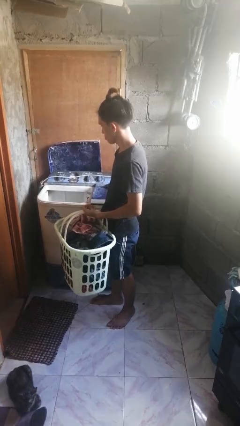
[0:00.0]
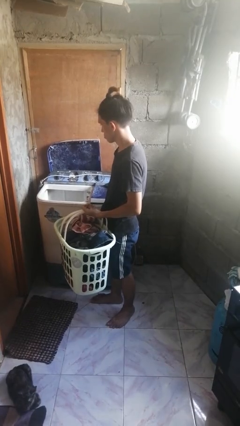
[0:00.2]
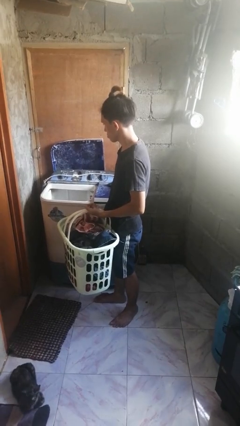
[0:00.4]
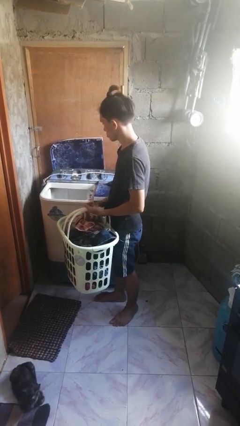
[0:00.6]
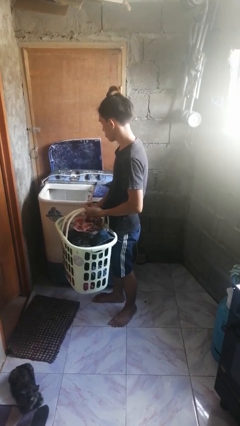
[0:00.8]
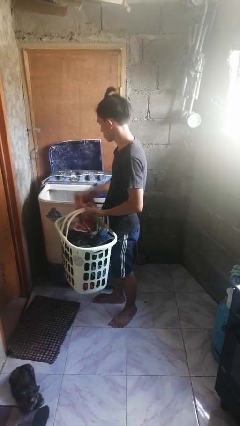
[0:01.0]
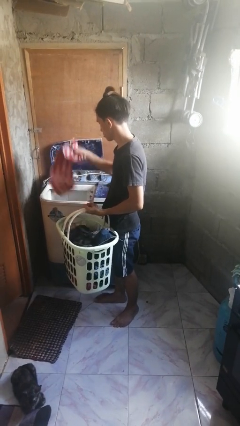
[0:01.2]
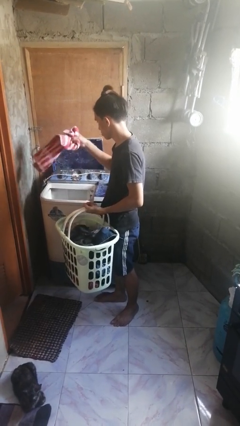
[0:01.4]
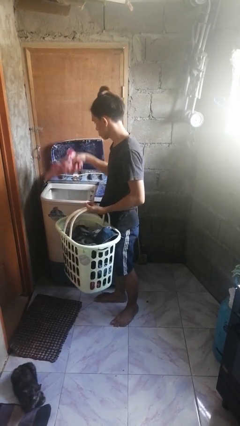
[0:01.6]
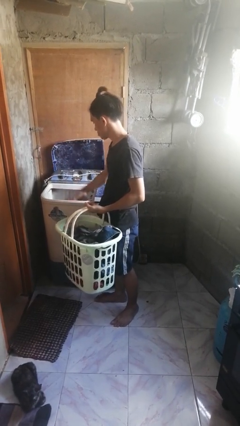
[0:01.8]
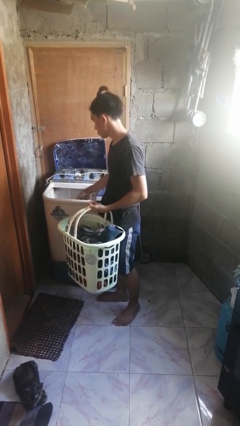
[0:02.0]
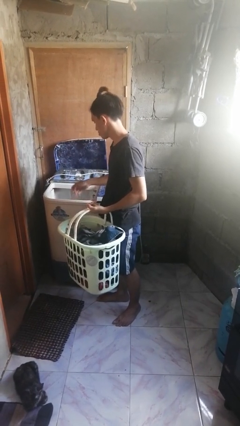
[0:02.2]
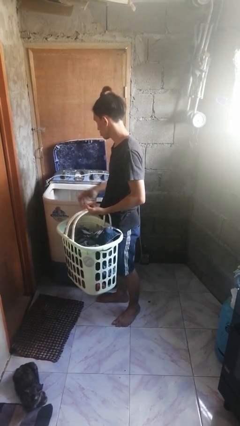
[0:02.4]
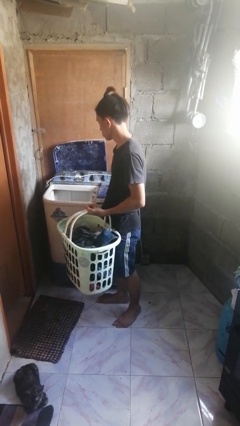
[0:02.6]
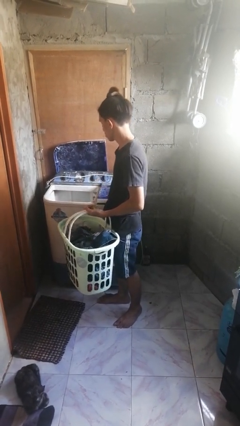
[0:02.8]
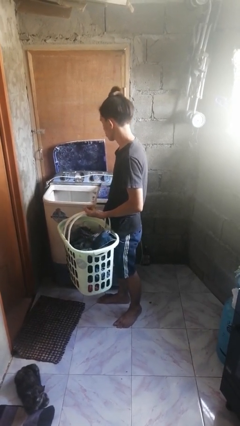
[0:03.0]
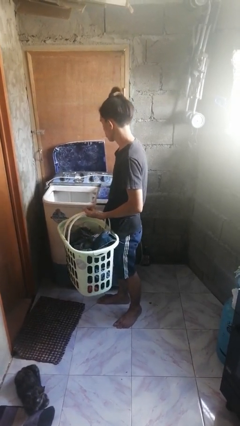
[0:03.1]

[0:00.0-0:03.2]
person loads clotheswasher

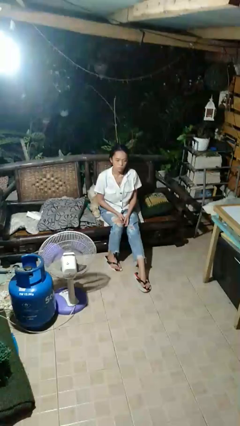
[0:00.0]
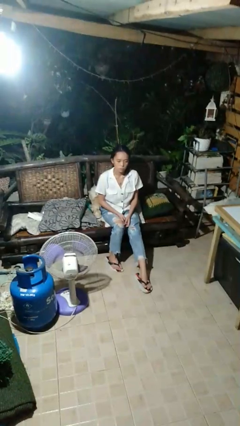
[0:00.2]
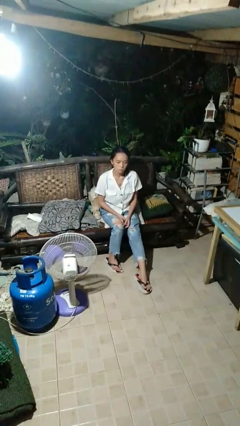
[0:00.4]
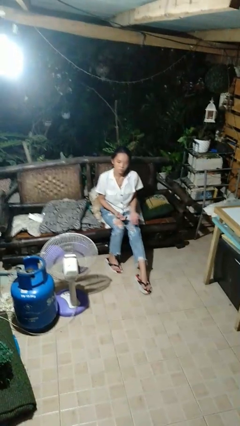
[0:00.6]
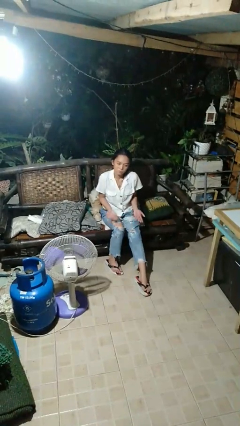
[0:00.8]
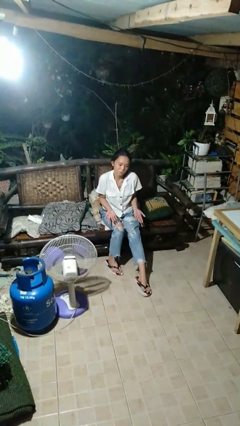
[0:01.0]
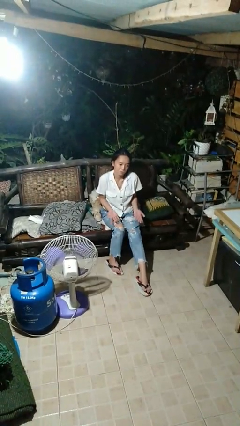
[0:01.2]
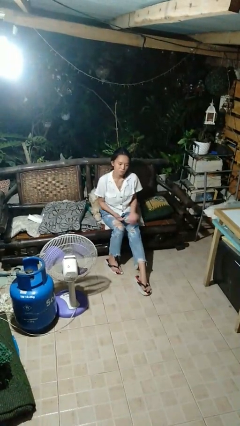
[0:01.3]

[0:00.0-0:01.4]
person shrugs

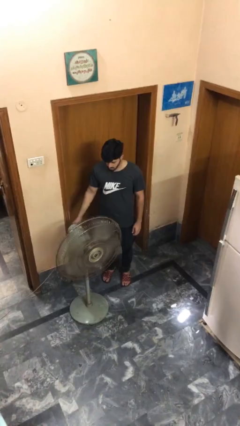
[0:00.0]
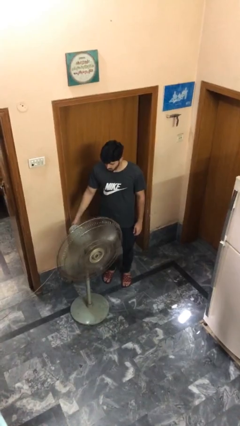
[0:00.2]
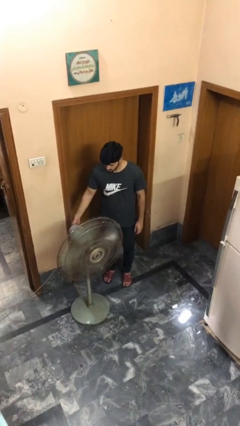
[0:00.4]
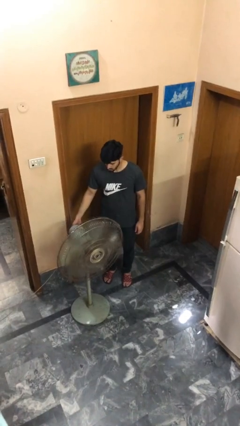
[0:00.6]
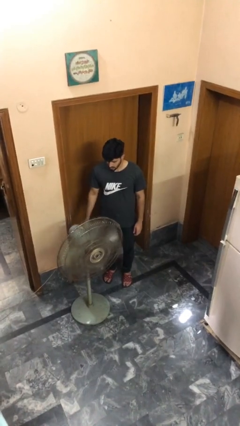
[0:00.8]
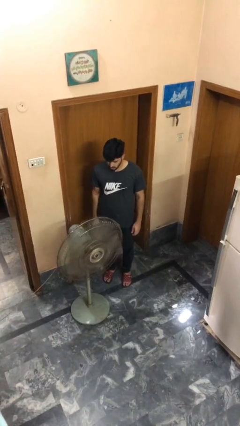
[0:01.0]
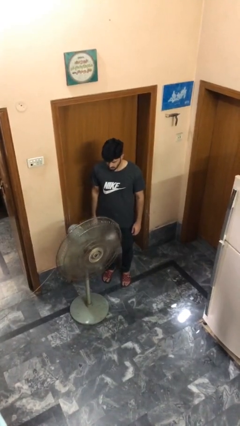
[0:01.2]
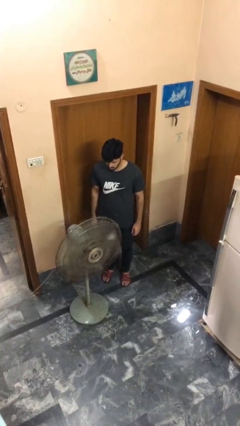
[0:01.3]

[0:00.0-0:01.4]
person turns on fan

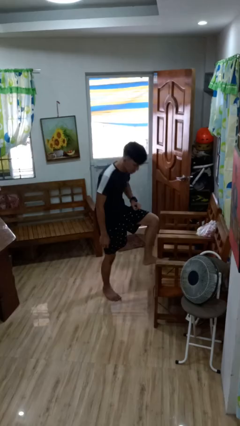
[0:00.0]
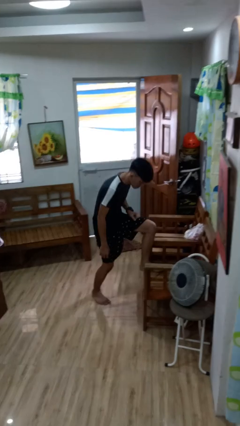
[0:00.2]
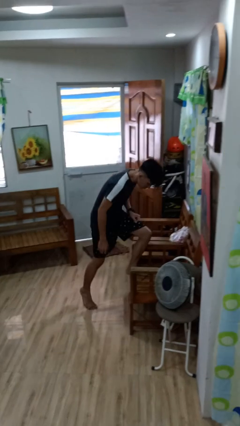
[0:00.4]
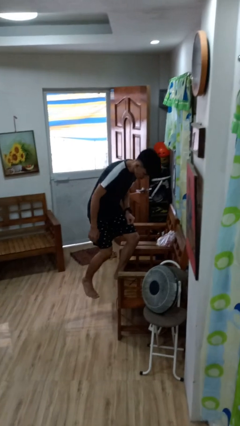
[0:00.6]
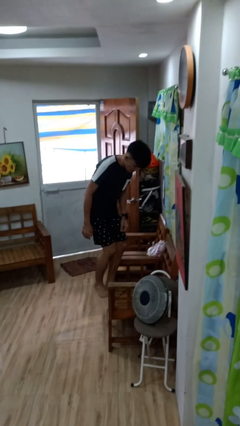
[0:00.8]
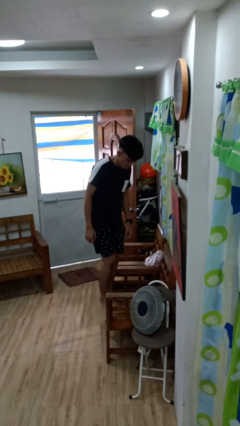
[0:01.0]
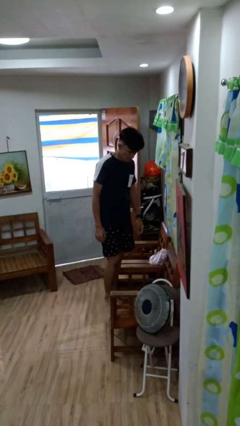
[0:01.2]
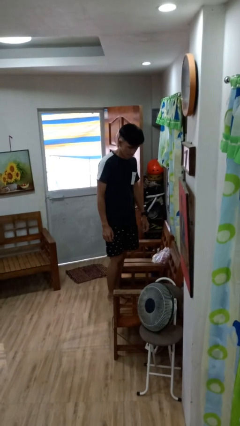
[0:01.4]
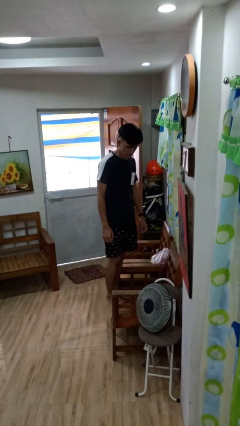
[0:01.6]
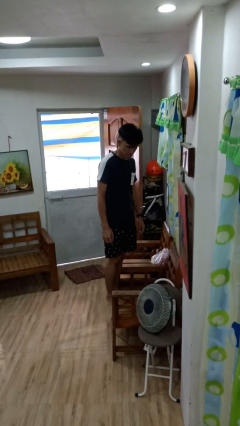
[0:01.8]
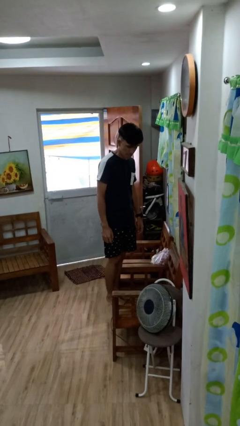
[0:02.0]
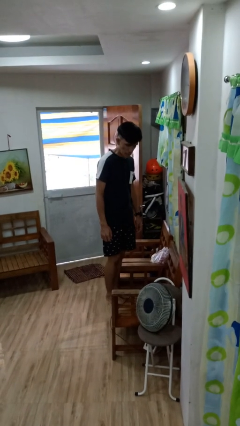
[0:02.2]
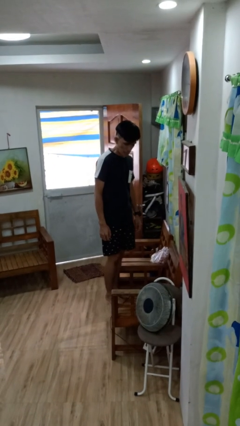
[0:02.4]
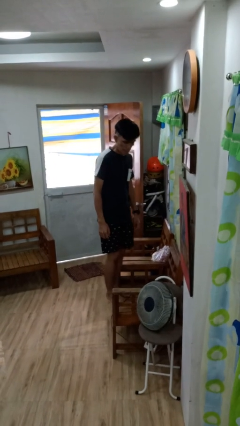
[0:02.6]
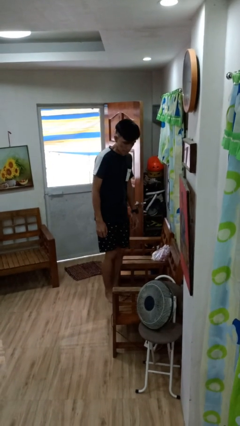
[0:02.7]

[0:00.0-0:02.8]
person climbs on chair

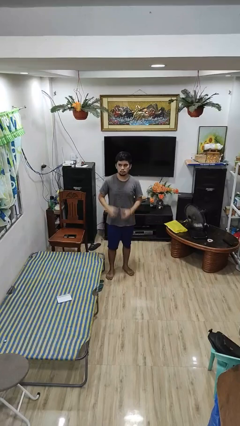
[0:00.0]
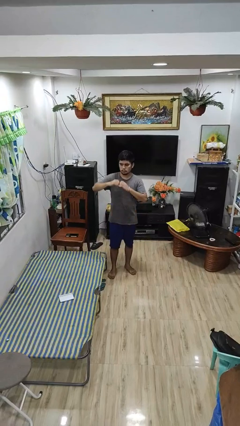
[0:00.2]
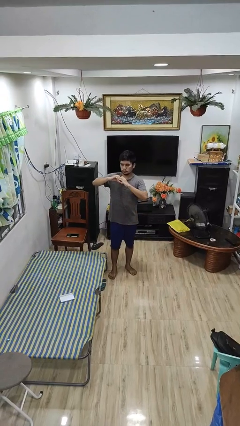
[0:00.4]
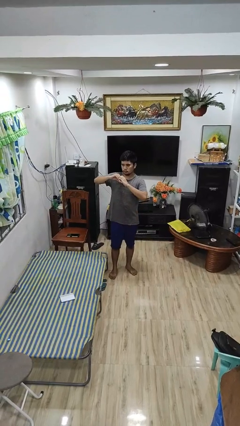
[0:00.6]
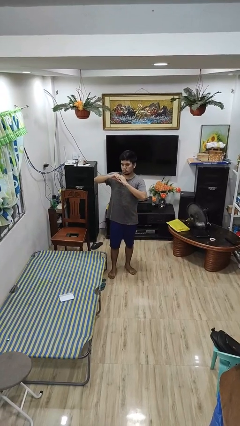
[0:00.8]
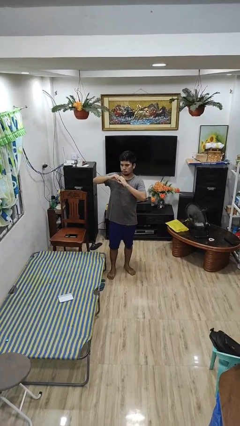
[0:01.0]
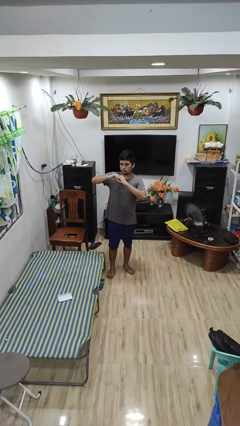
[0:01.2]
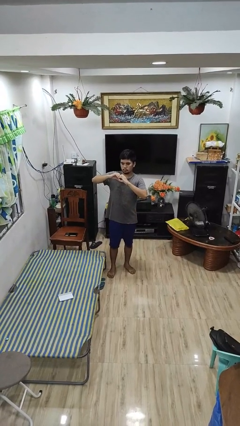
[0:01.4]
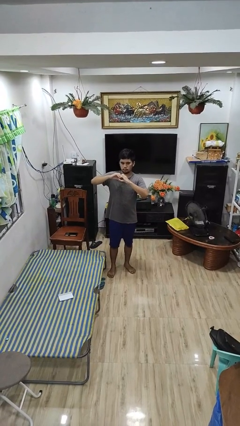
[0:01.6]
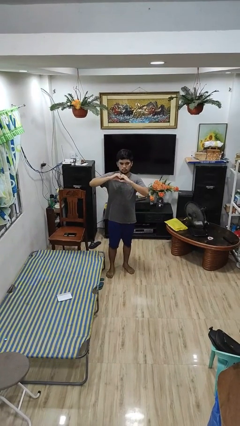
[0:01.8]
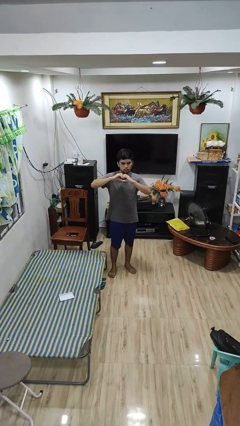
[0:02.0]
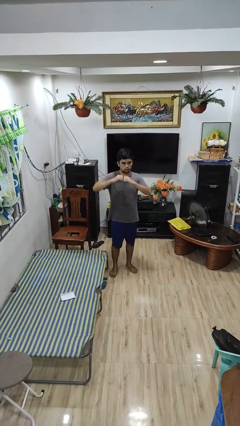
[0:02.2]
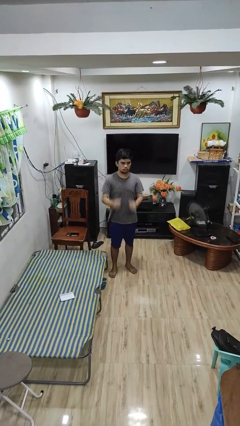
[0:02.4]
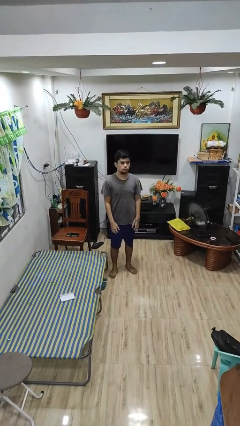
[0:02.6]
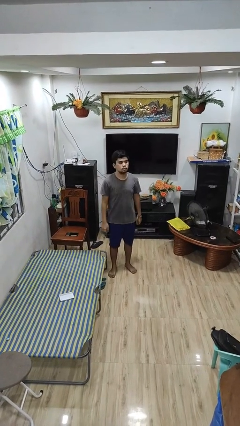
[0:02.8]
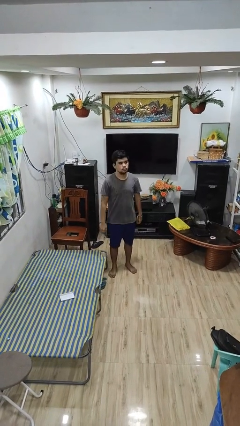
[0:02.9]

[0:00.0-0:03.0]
person gestures heart

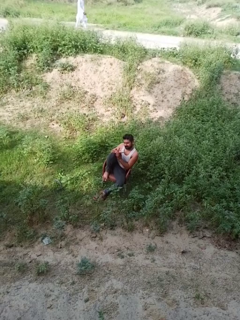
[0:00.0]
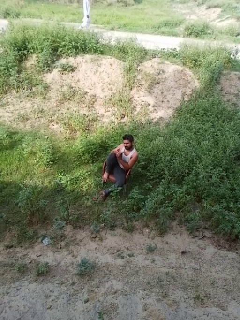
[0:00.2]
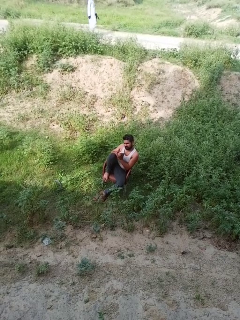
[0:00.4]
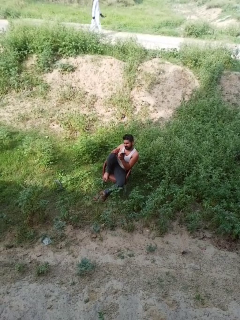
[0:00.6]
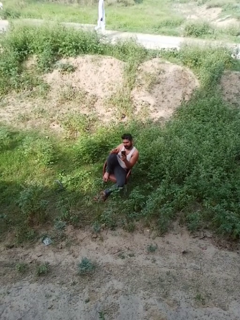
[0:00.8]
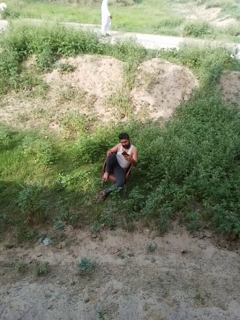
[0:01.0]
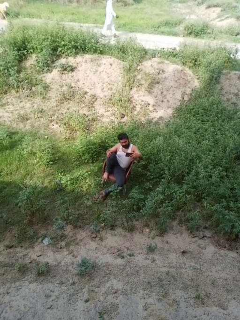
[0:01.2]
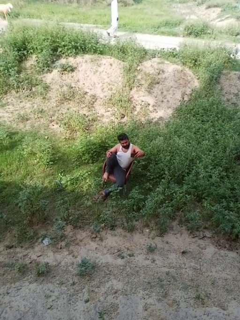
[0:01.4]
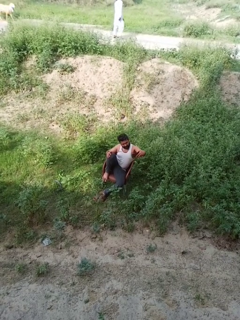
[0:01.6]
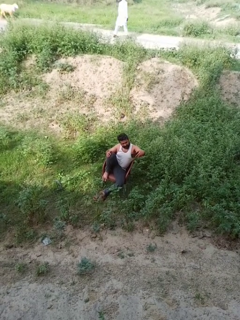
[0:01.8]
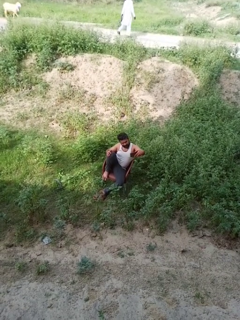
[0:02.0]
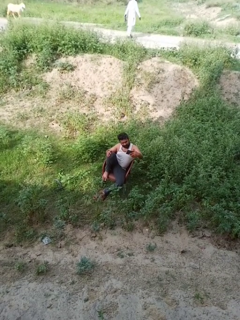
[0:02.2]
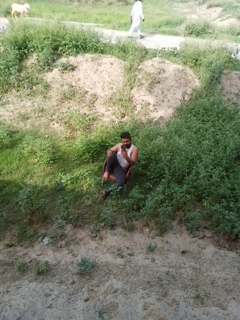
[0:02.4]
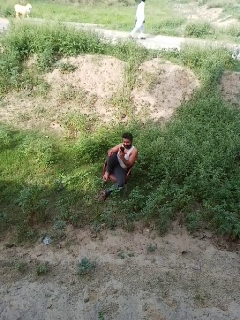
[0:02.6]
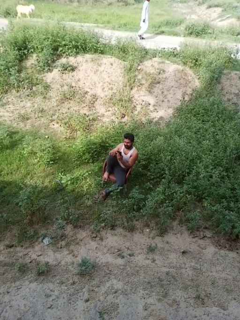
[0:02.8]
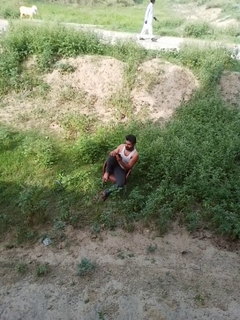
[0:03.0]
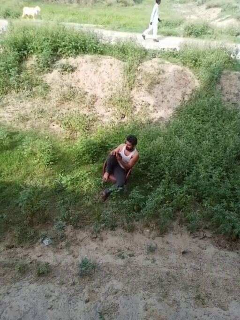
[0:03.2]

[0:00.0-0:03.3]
person takes selfie

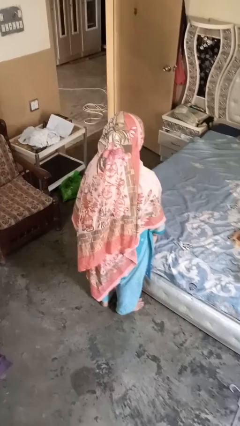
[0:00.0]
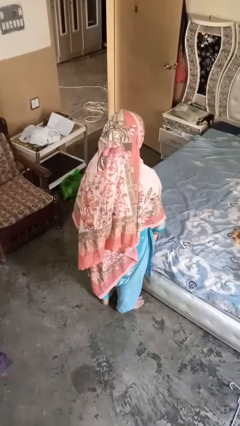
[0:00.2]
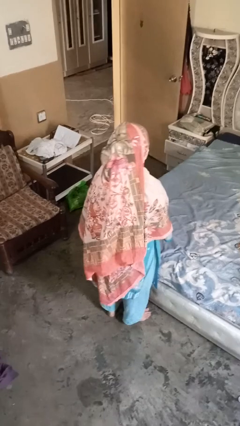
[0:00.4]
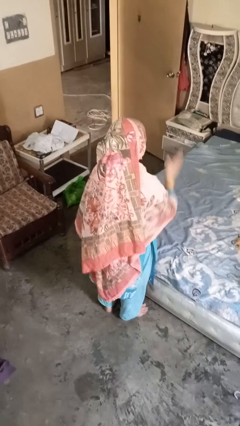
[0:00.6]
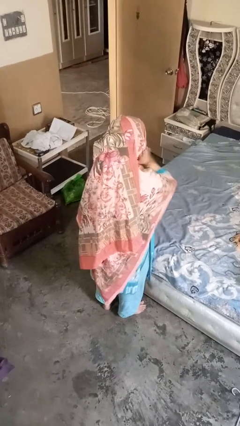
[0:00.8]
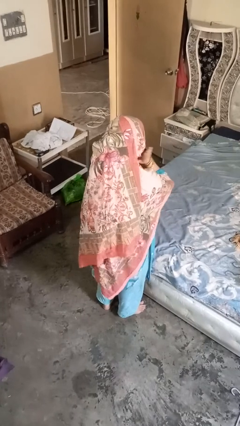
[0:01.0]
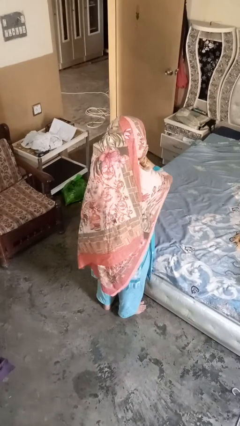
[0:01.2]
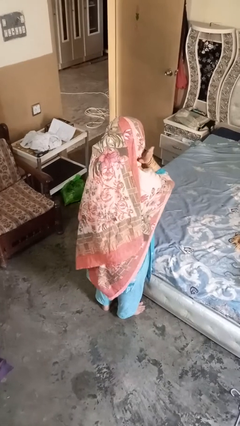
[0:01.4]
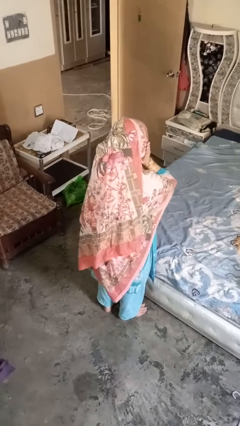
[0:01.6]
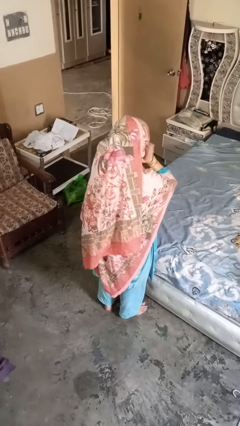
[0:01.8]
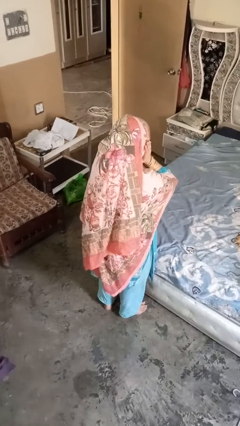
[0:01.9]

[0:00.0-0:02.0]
person strokes chin

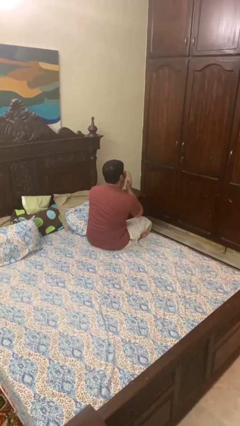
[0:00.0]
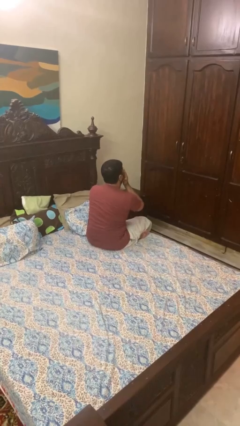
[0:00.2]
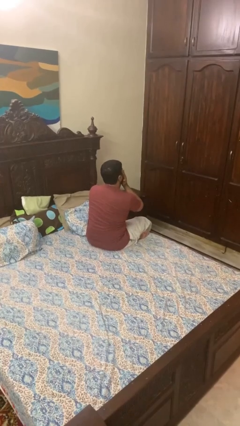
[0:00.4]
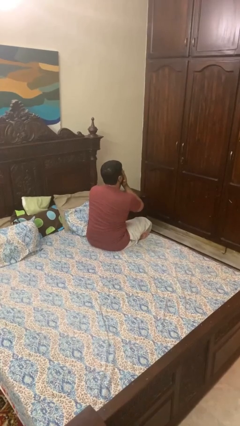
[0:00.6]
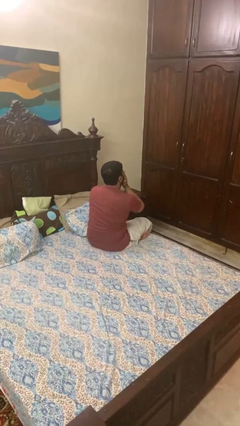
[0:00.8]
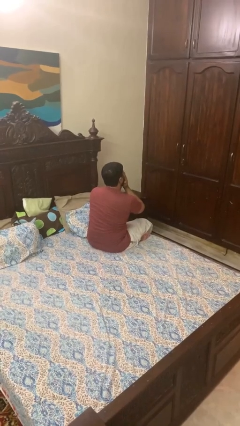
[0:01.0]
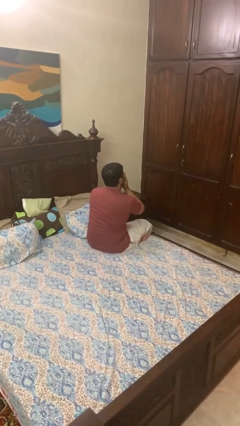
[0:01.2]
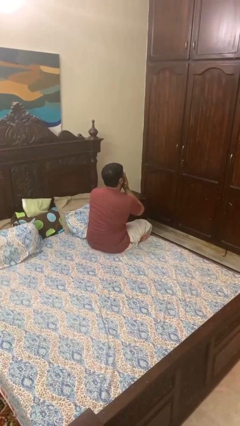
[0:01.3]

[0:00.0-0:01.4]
person covers face with hands
